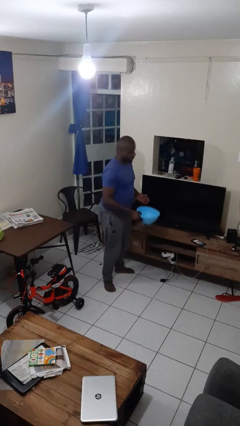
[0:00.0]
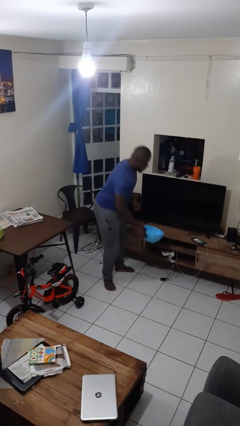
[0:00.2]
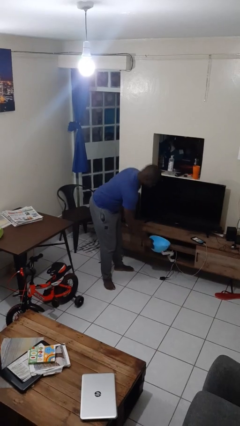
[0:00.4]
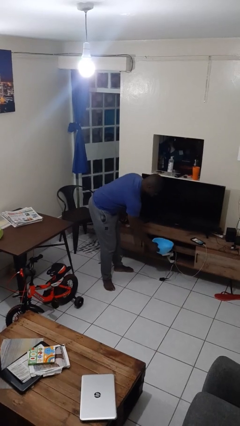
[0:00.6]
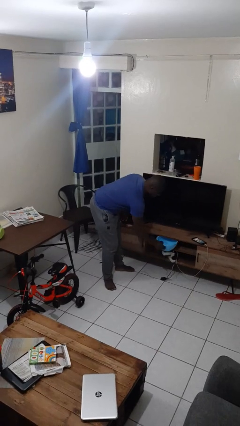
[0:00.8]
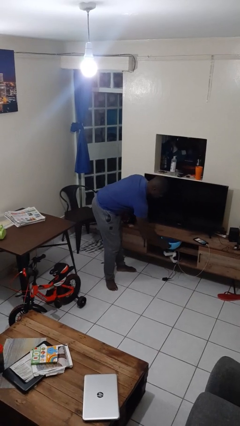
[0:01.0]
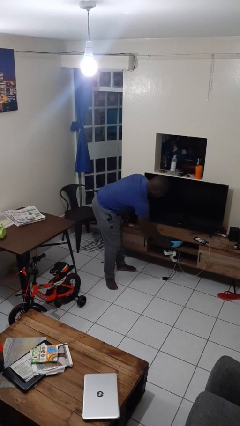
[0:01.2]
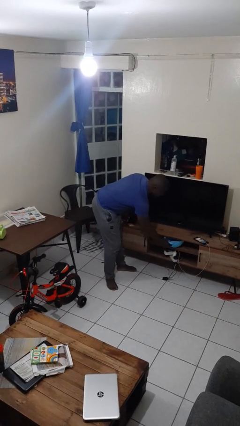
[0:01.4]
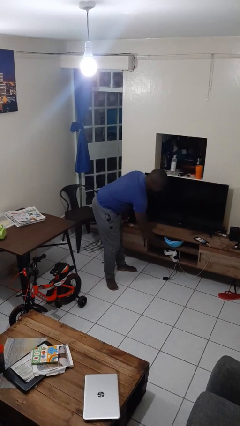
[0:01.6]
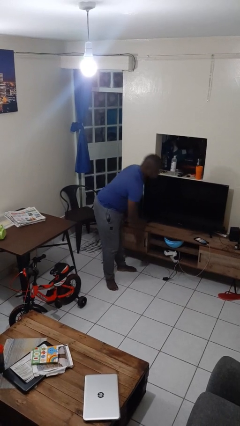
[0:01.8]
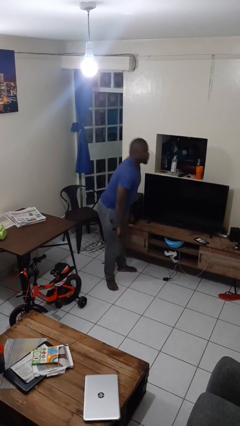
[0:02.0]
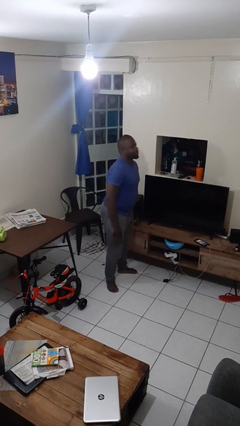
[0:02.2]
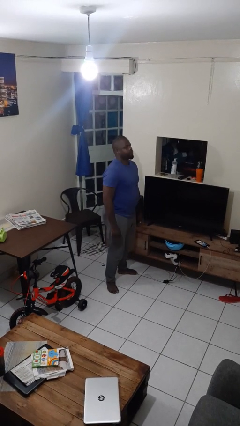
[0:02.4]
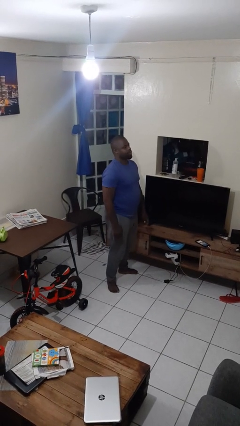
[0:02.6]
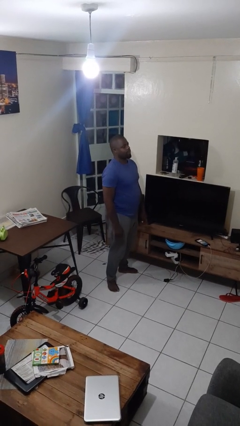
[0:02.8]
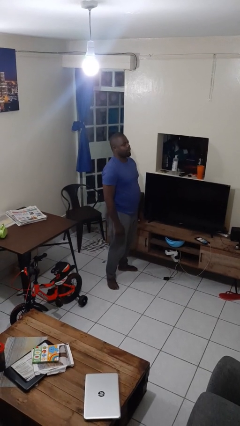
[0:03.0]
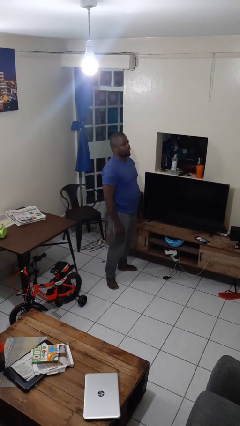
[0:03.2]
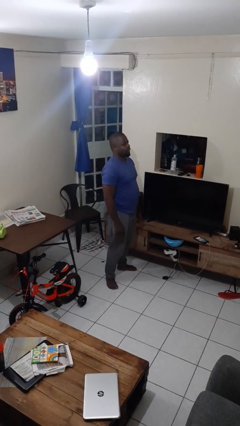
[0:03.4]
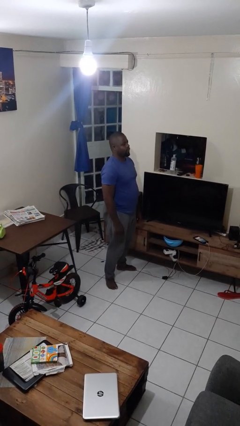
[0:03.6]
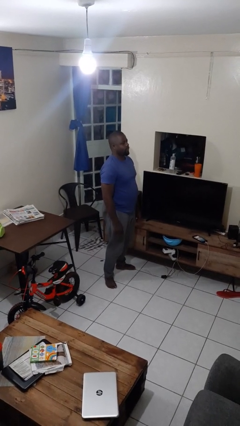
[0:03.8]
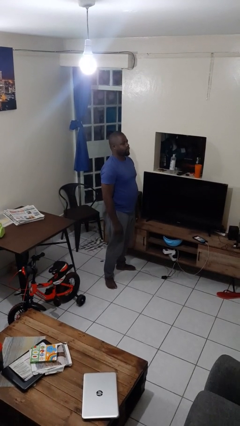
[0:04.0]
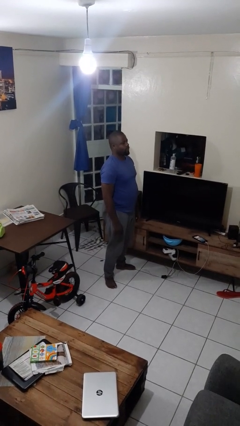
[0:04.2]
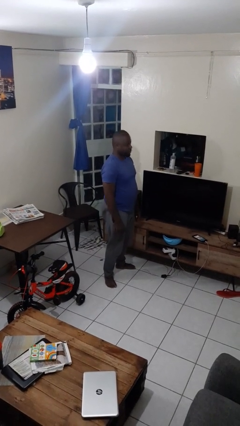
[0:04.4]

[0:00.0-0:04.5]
person puts down object into cabinet

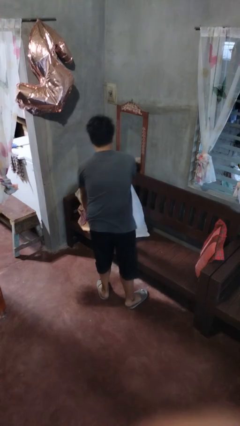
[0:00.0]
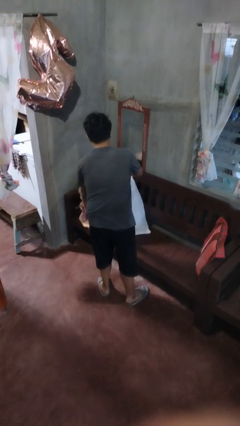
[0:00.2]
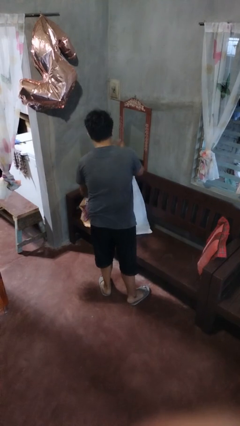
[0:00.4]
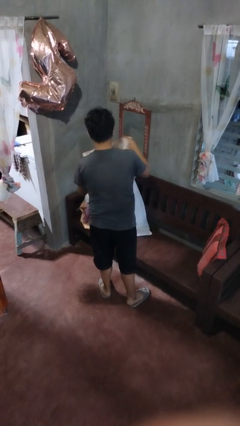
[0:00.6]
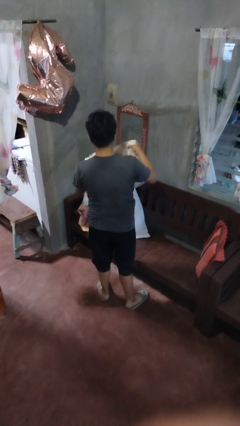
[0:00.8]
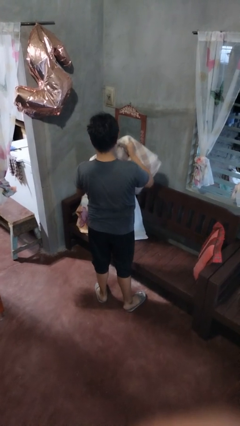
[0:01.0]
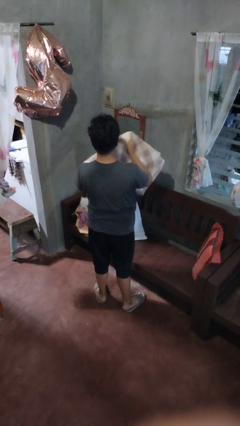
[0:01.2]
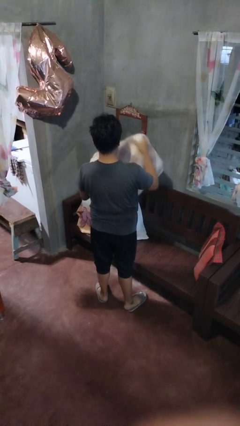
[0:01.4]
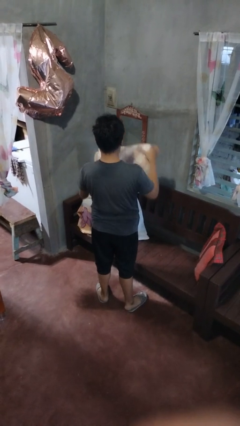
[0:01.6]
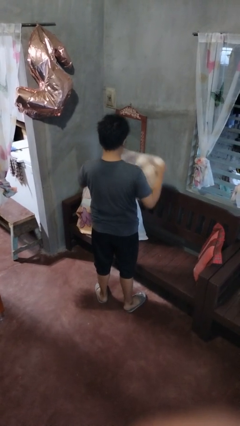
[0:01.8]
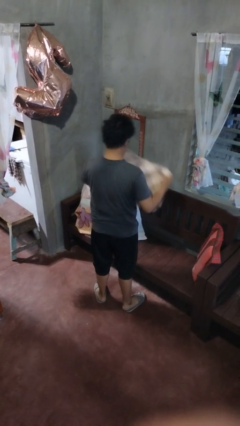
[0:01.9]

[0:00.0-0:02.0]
person picks up object from couch

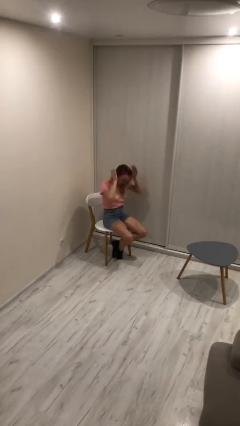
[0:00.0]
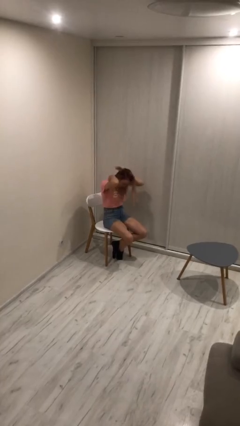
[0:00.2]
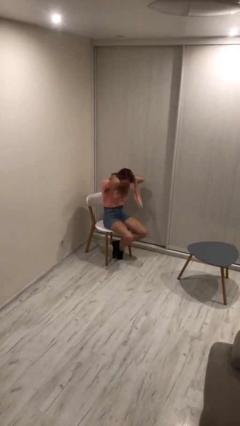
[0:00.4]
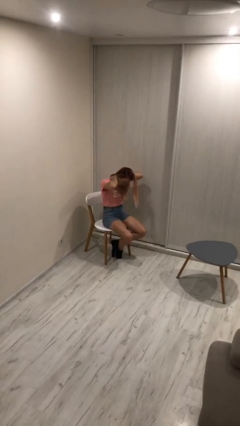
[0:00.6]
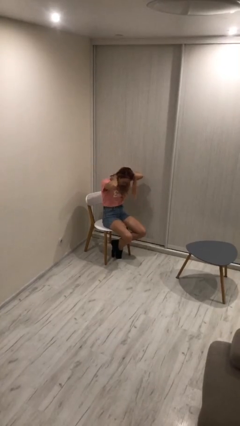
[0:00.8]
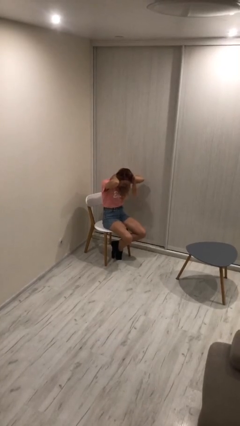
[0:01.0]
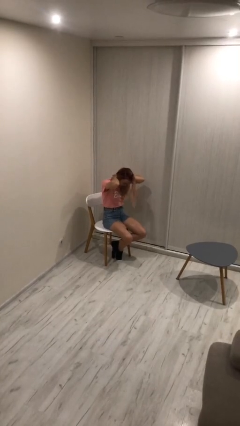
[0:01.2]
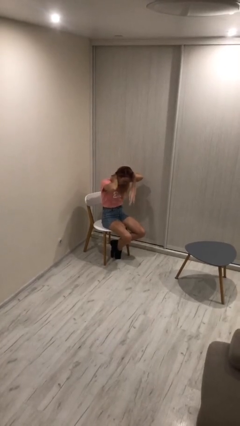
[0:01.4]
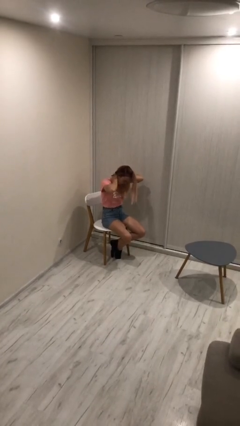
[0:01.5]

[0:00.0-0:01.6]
person rubs neck

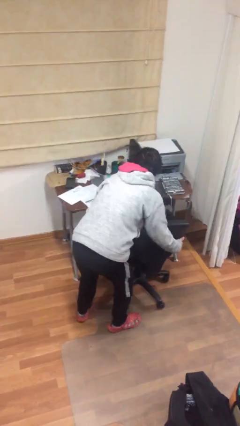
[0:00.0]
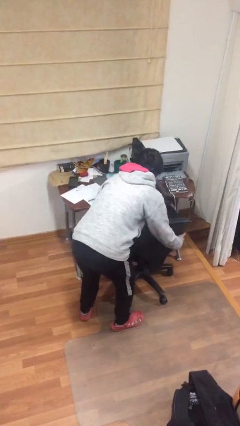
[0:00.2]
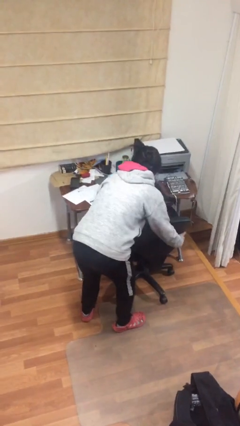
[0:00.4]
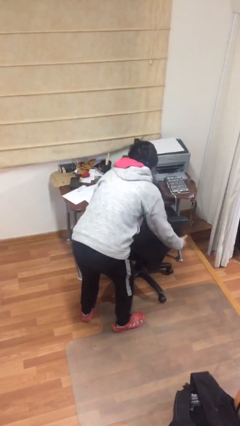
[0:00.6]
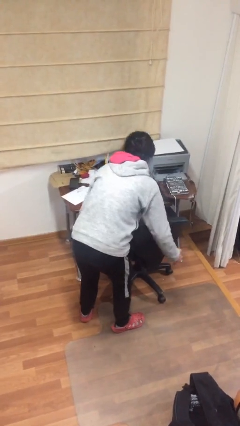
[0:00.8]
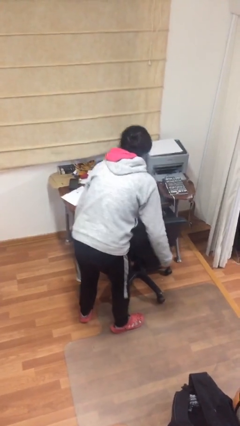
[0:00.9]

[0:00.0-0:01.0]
person puts down object on floor

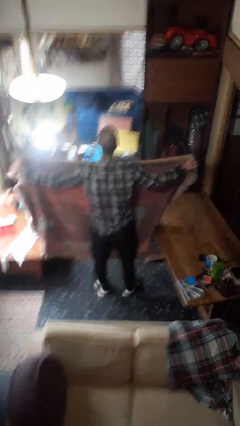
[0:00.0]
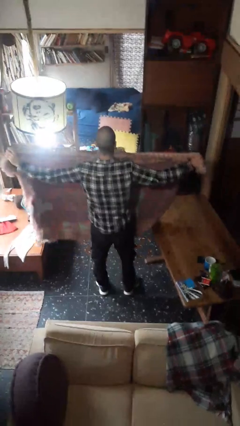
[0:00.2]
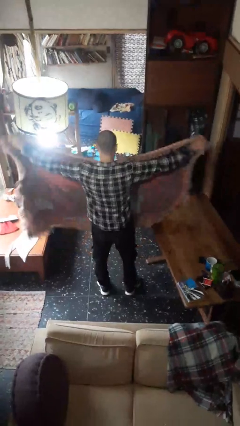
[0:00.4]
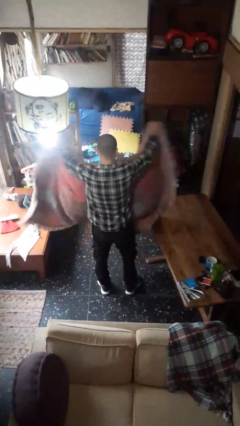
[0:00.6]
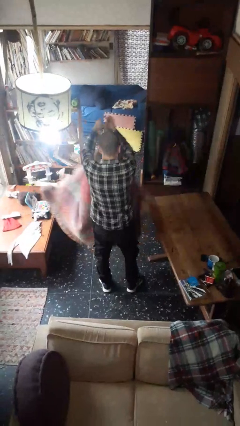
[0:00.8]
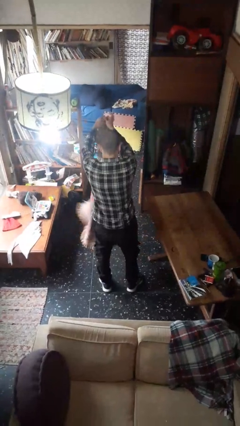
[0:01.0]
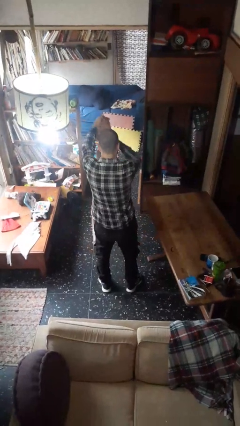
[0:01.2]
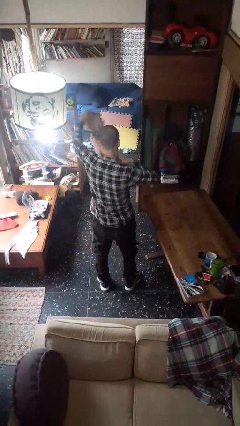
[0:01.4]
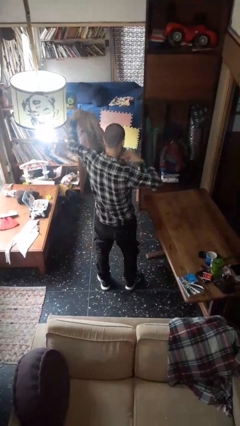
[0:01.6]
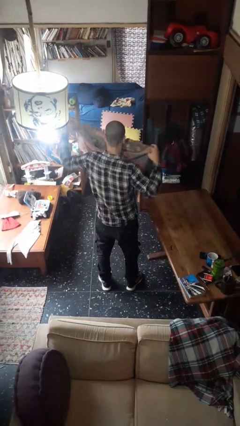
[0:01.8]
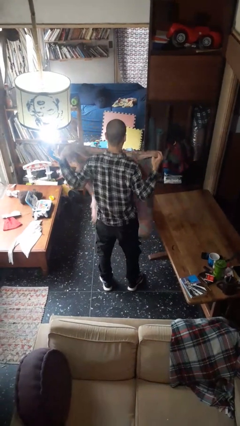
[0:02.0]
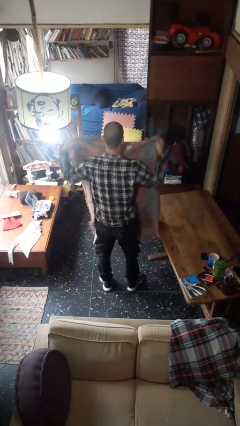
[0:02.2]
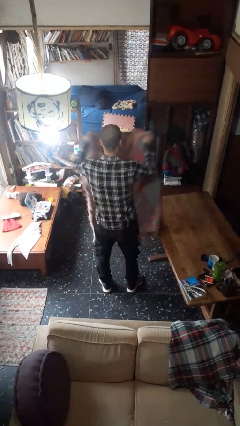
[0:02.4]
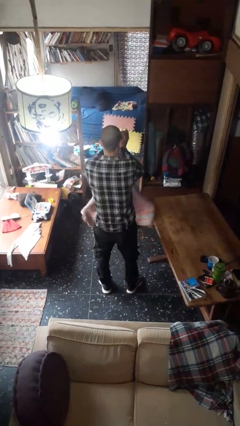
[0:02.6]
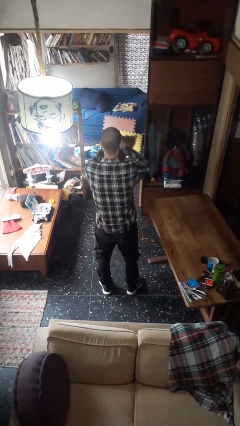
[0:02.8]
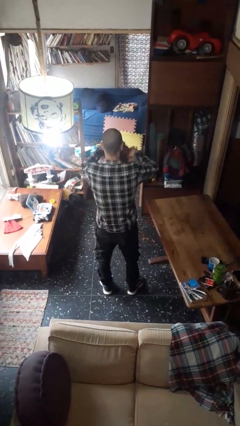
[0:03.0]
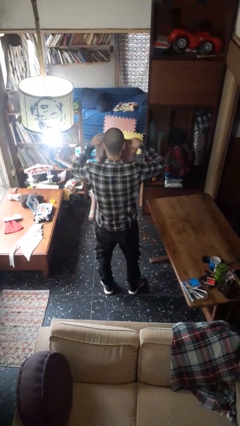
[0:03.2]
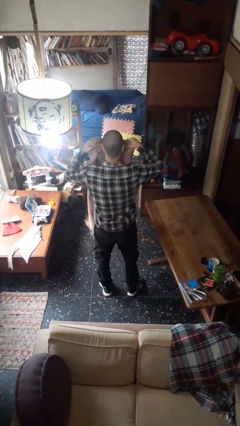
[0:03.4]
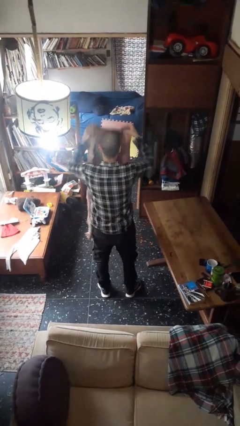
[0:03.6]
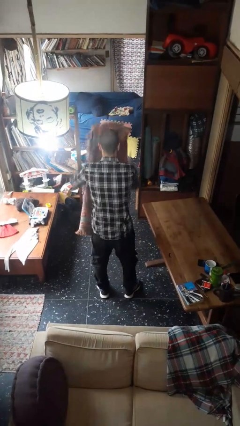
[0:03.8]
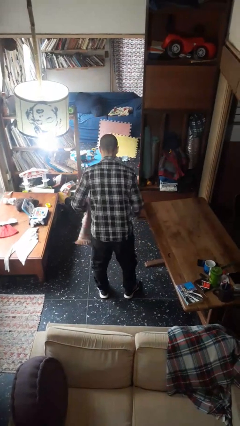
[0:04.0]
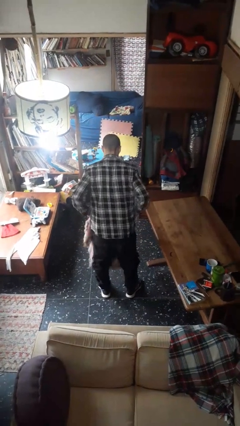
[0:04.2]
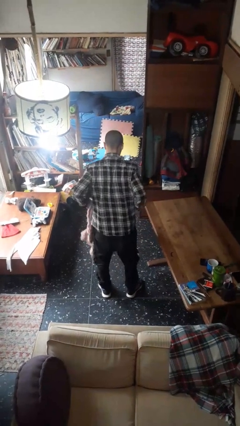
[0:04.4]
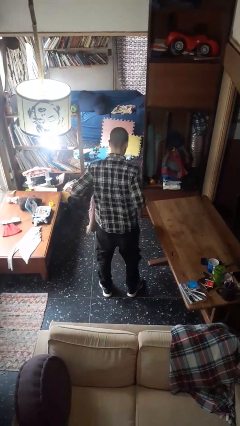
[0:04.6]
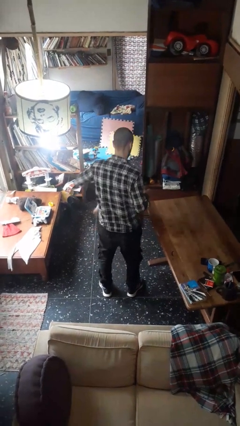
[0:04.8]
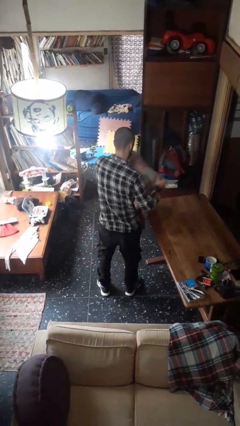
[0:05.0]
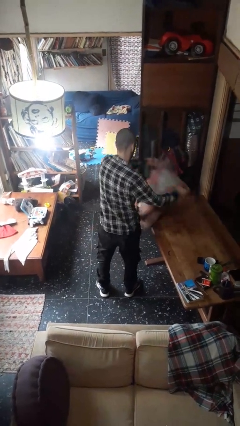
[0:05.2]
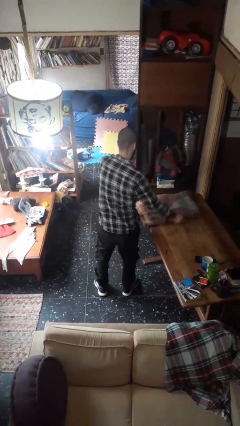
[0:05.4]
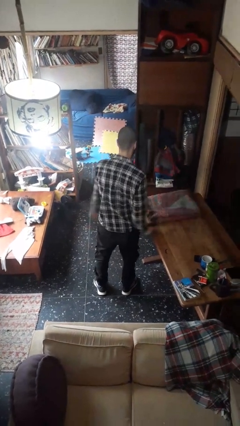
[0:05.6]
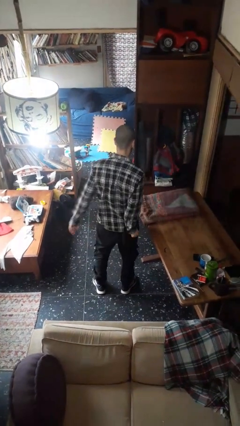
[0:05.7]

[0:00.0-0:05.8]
person folds blanket

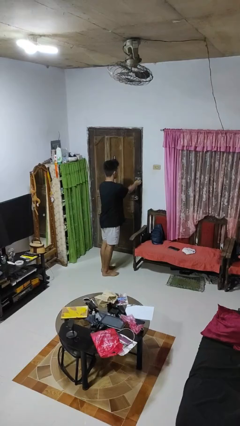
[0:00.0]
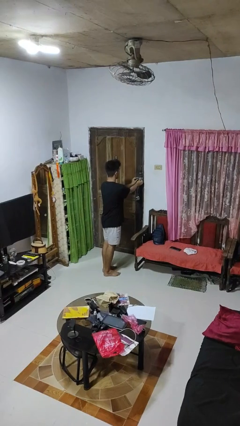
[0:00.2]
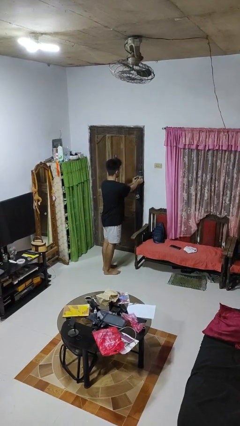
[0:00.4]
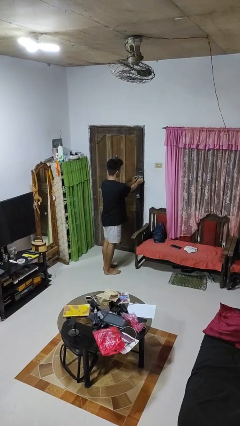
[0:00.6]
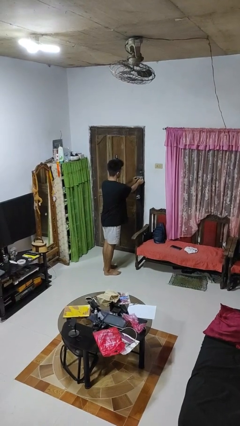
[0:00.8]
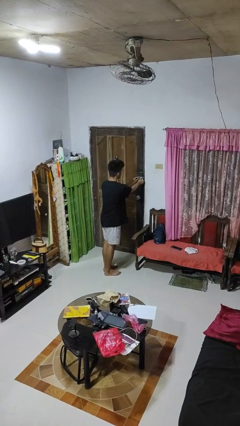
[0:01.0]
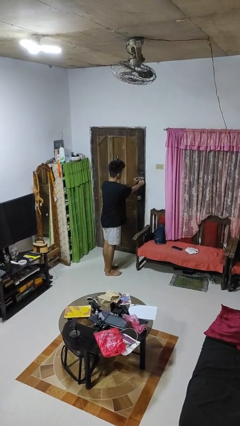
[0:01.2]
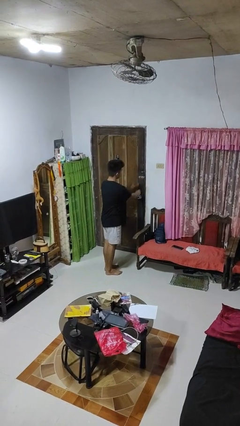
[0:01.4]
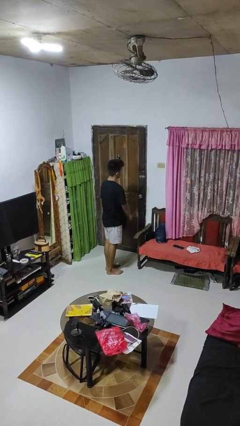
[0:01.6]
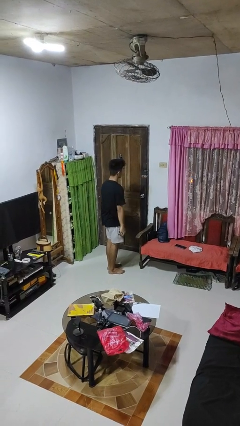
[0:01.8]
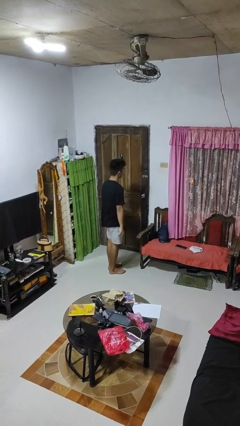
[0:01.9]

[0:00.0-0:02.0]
person locks door with keys

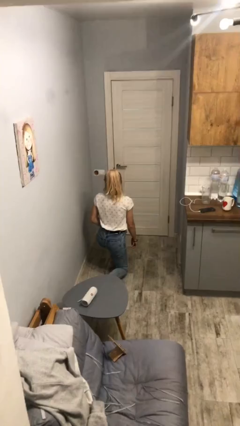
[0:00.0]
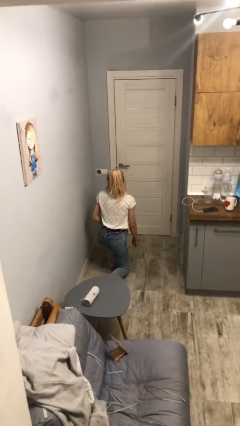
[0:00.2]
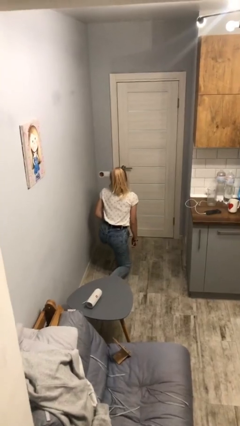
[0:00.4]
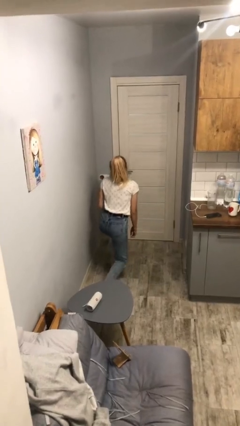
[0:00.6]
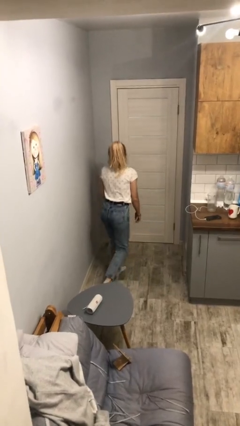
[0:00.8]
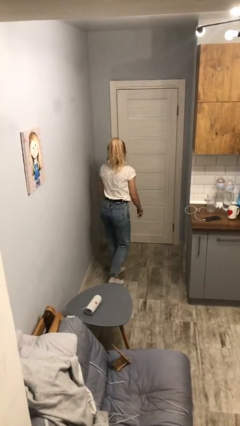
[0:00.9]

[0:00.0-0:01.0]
person stands up from floor
